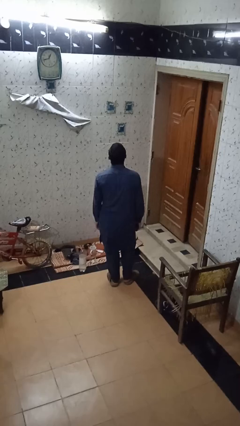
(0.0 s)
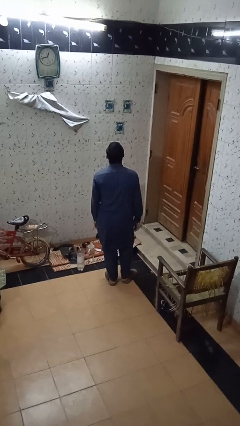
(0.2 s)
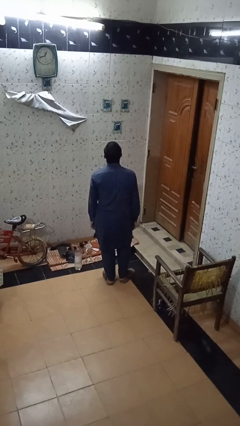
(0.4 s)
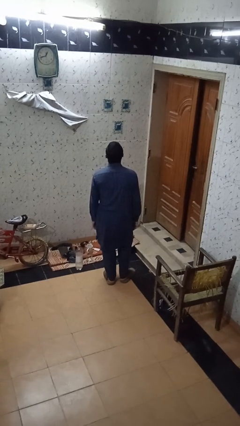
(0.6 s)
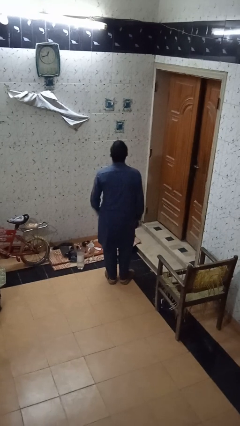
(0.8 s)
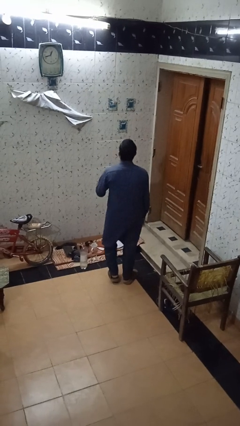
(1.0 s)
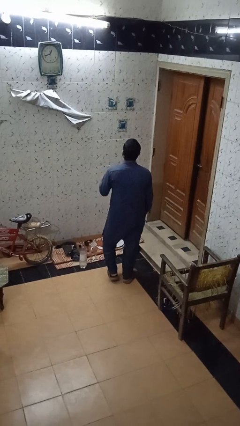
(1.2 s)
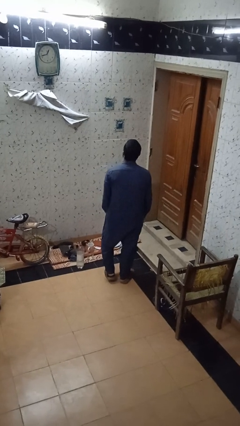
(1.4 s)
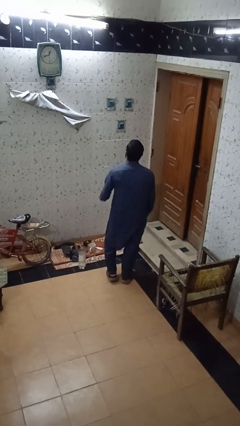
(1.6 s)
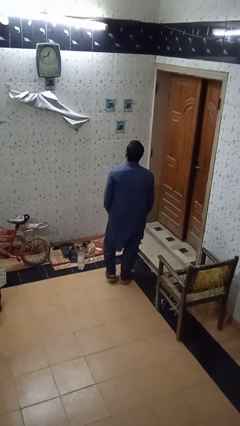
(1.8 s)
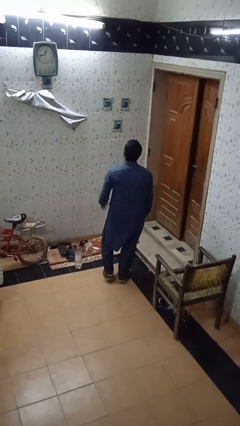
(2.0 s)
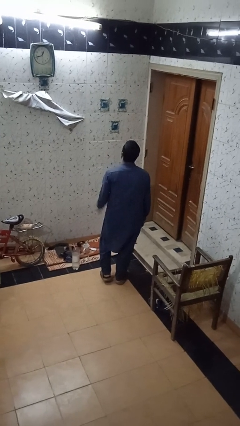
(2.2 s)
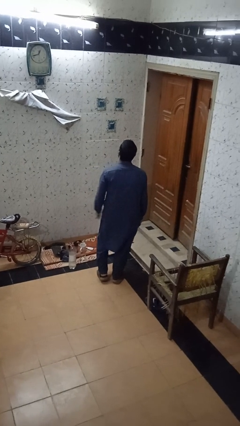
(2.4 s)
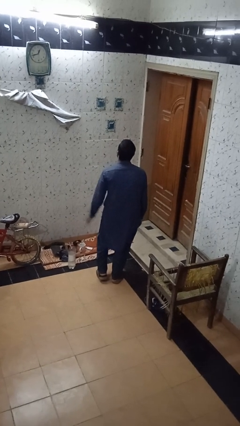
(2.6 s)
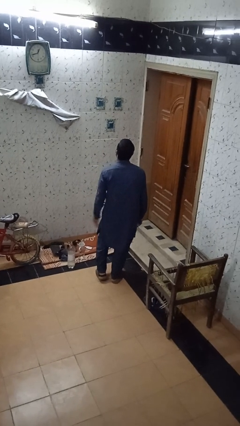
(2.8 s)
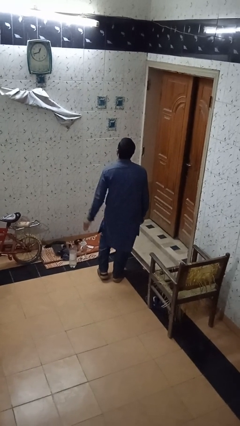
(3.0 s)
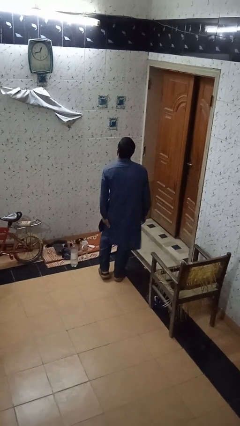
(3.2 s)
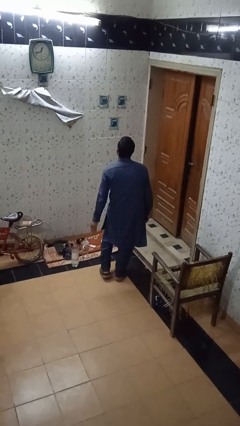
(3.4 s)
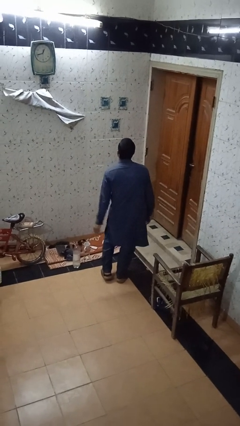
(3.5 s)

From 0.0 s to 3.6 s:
person slaps hands on thighs

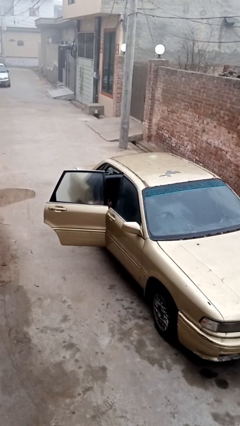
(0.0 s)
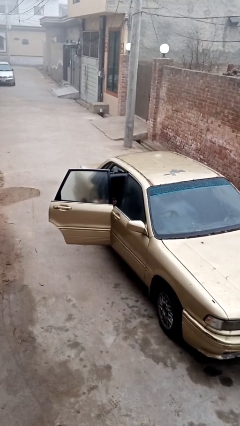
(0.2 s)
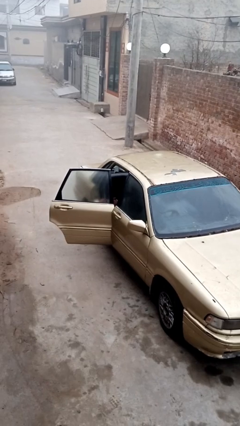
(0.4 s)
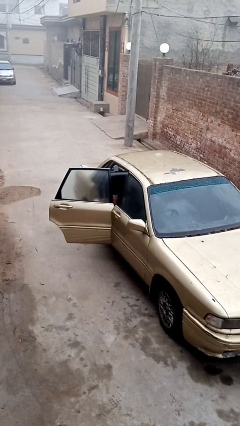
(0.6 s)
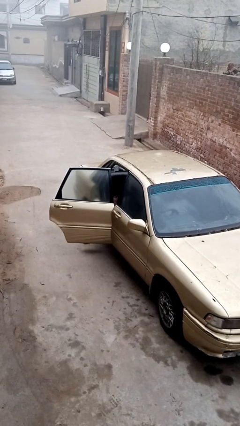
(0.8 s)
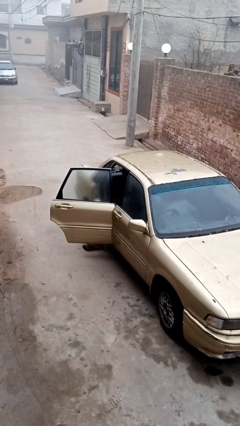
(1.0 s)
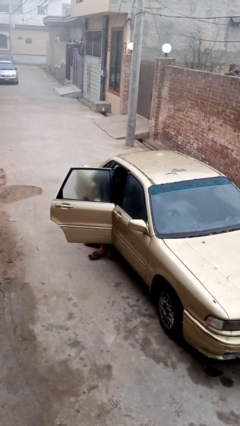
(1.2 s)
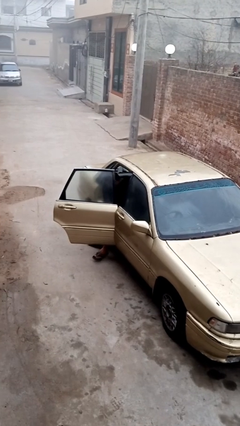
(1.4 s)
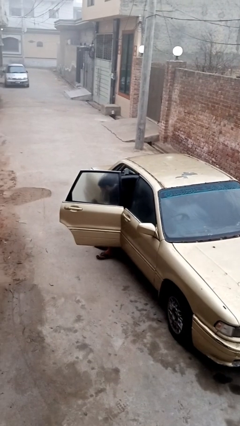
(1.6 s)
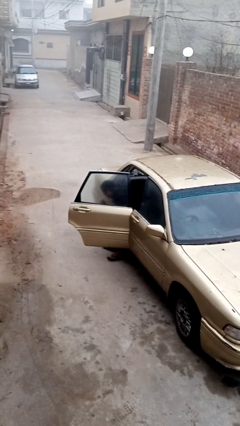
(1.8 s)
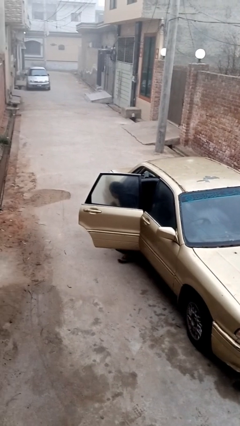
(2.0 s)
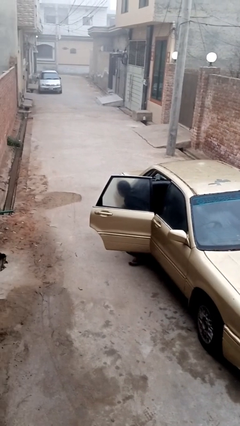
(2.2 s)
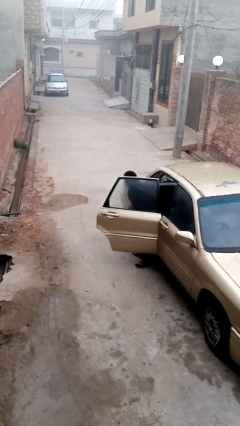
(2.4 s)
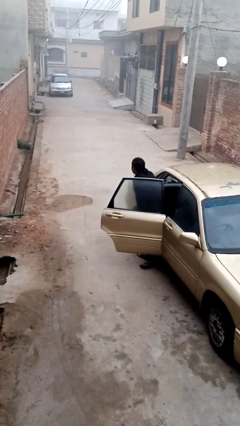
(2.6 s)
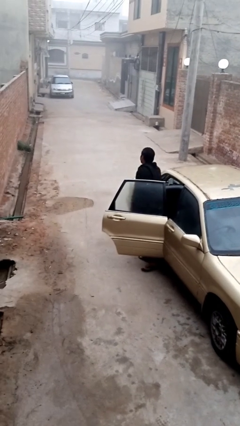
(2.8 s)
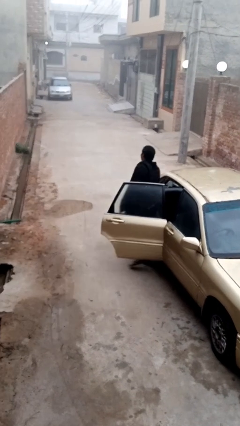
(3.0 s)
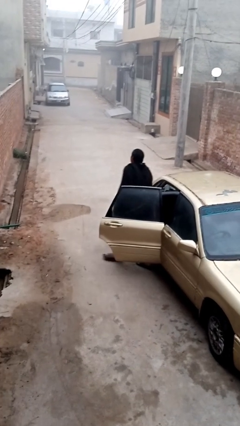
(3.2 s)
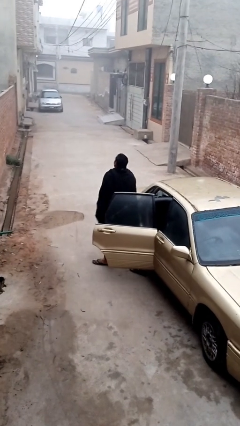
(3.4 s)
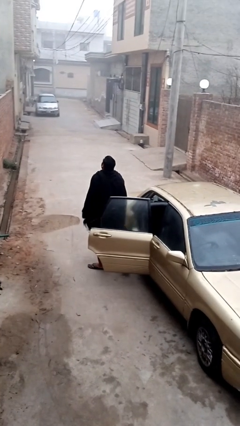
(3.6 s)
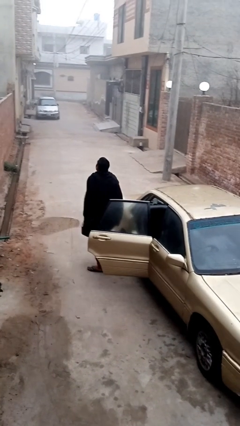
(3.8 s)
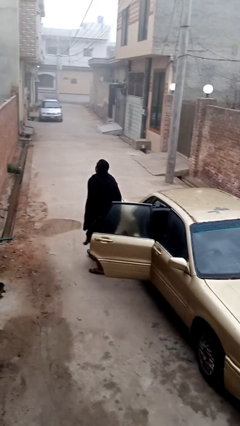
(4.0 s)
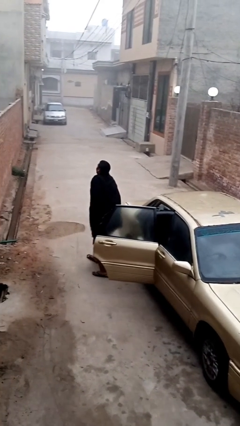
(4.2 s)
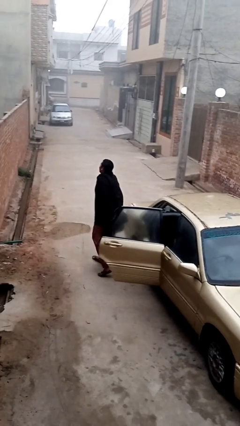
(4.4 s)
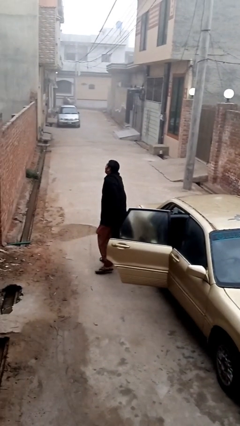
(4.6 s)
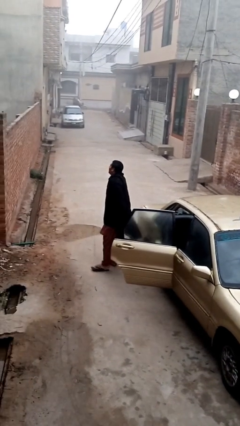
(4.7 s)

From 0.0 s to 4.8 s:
person exits car

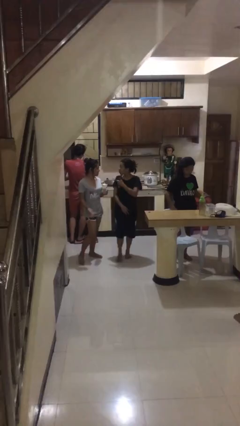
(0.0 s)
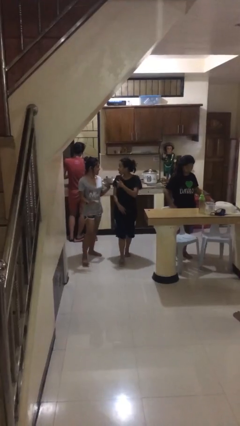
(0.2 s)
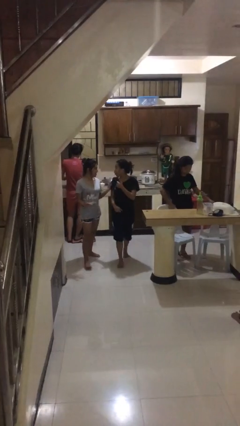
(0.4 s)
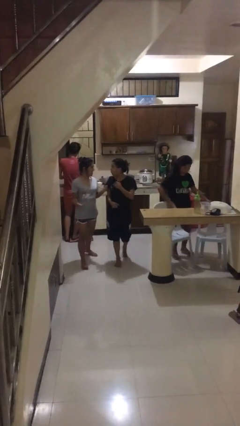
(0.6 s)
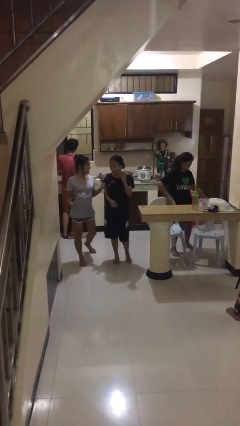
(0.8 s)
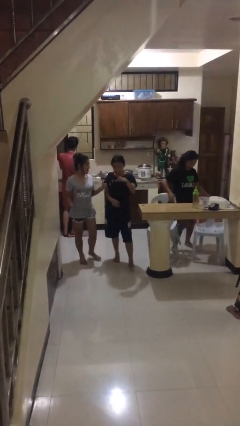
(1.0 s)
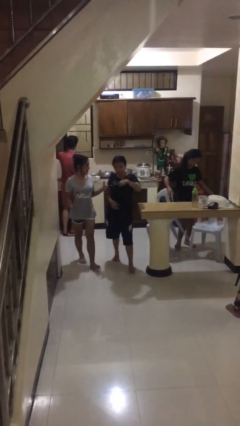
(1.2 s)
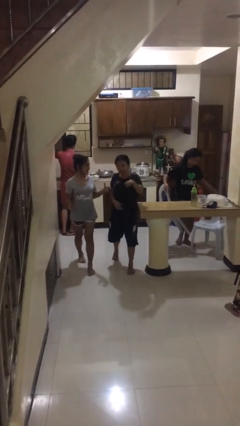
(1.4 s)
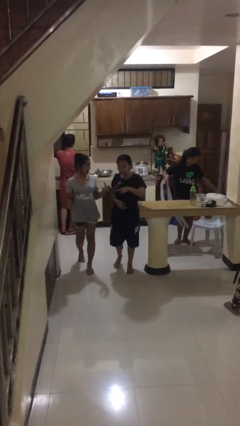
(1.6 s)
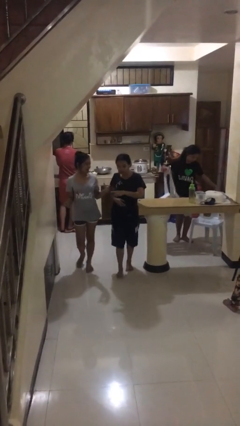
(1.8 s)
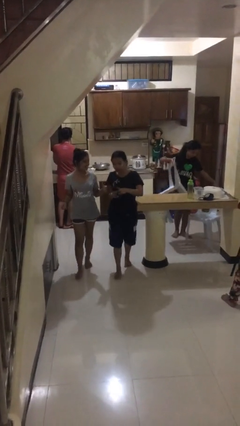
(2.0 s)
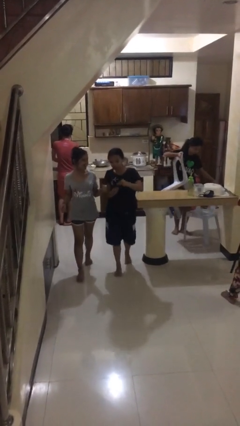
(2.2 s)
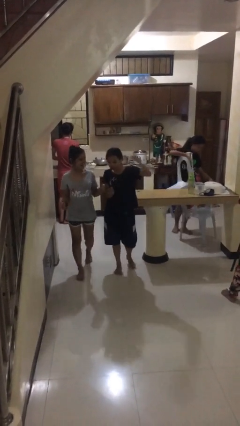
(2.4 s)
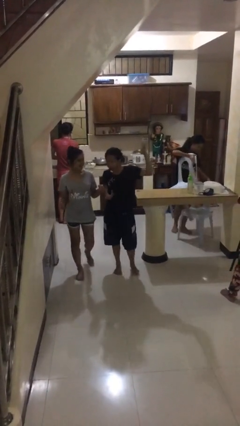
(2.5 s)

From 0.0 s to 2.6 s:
person talks to person

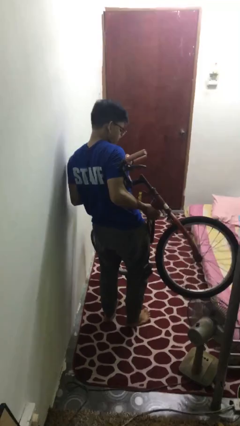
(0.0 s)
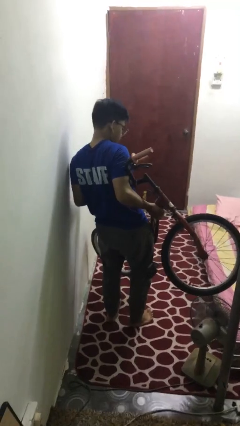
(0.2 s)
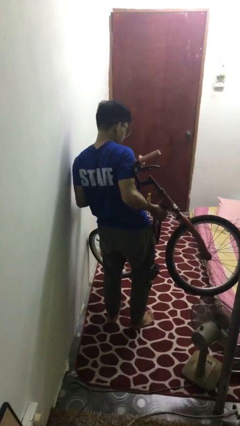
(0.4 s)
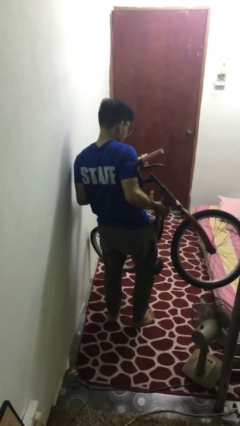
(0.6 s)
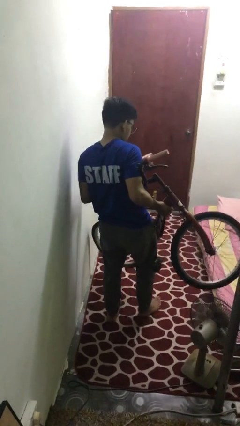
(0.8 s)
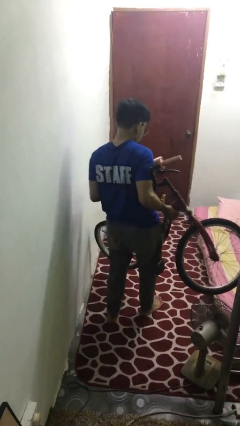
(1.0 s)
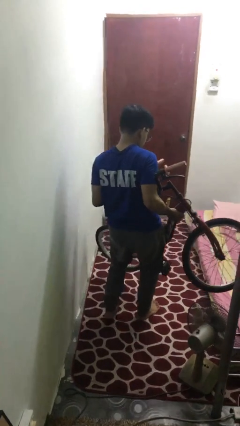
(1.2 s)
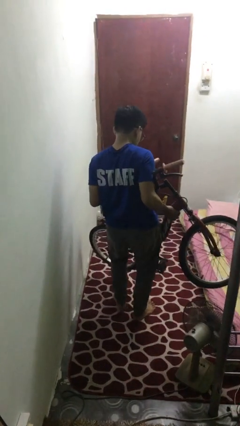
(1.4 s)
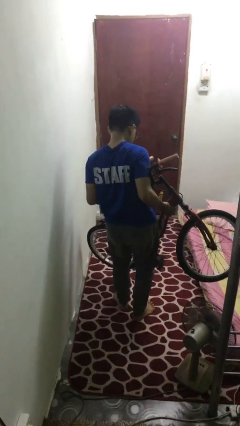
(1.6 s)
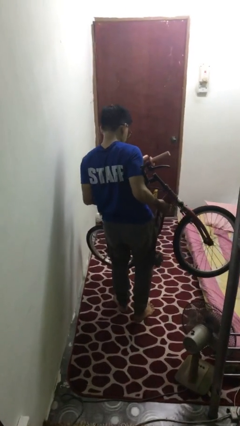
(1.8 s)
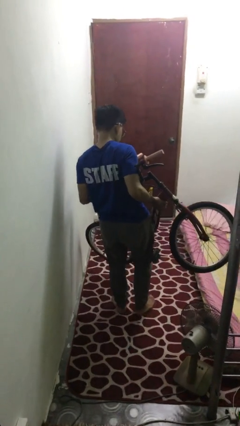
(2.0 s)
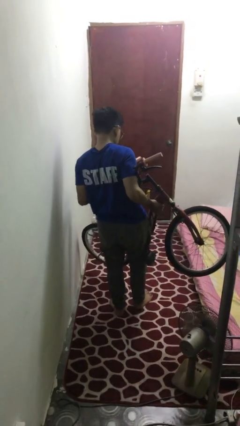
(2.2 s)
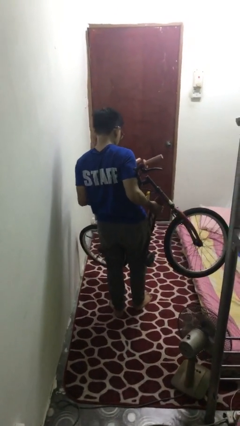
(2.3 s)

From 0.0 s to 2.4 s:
person carries bicycle

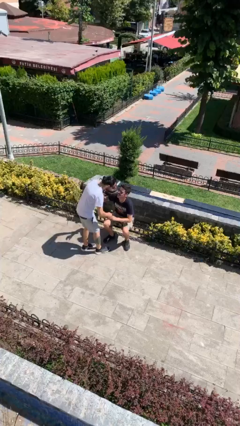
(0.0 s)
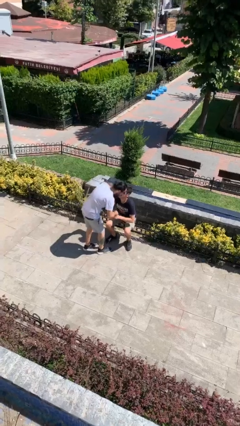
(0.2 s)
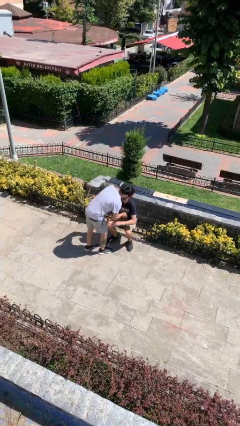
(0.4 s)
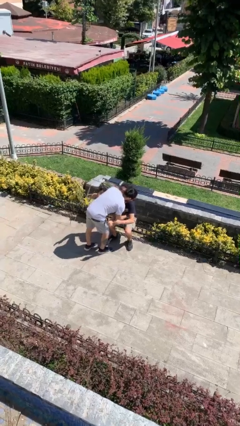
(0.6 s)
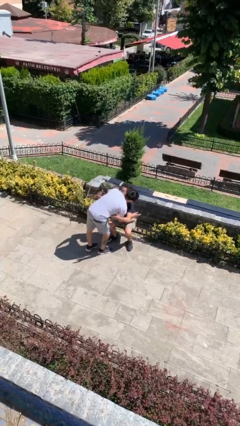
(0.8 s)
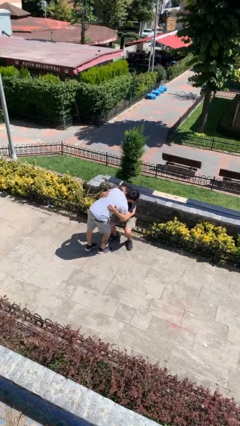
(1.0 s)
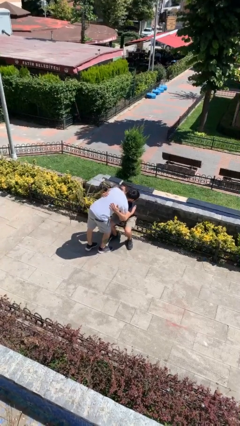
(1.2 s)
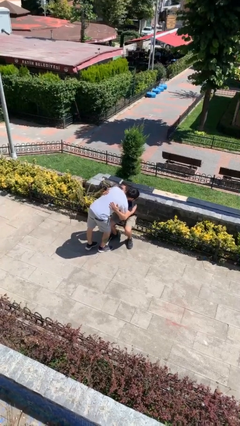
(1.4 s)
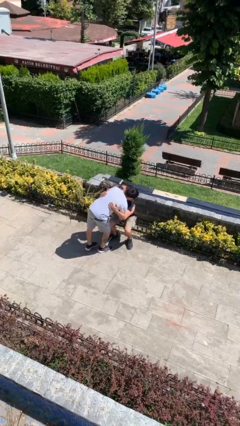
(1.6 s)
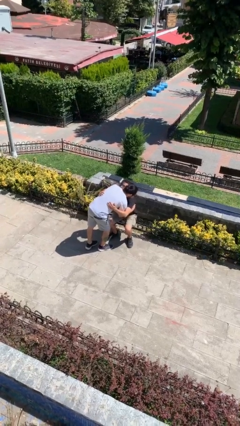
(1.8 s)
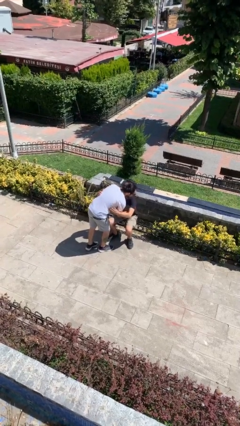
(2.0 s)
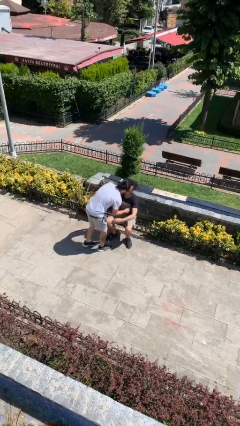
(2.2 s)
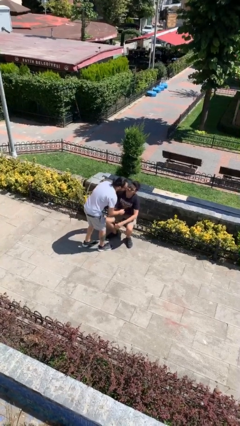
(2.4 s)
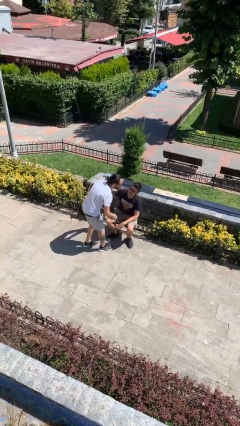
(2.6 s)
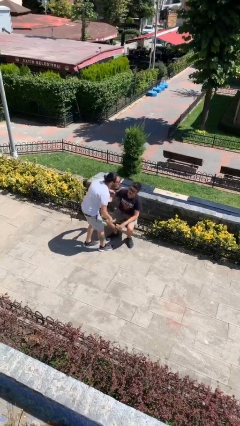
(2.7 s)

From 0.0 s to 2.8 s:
person embraces person

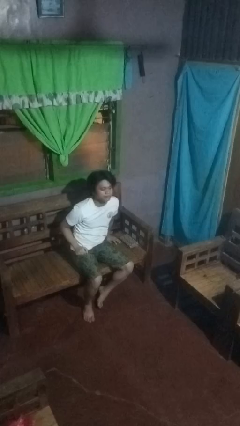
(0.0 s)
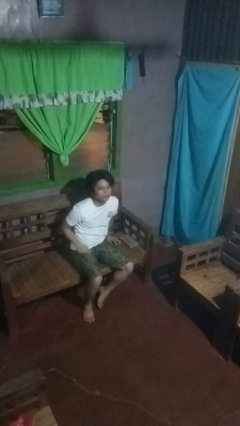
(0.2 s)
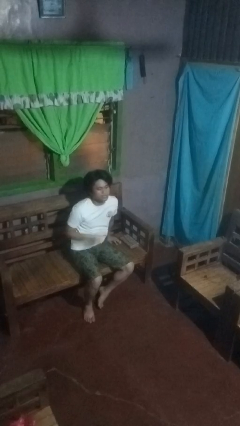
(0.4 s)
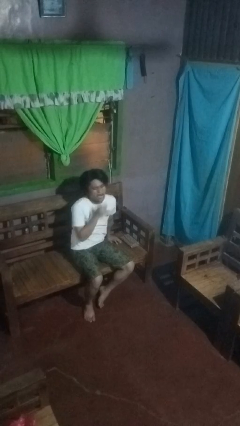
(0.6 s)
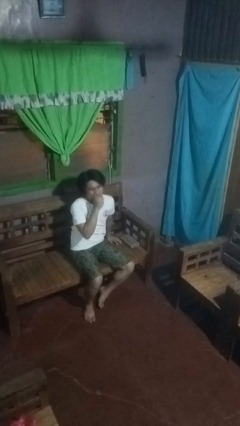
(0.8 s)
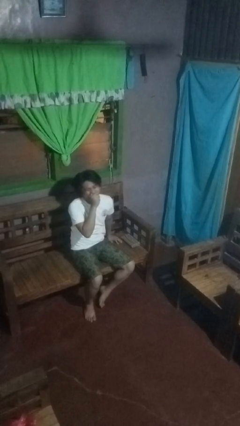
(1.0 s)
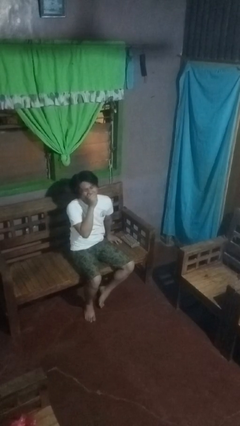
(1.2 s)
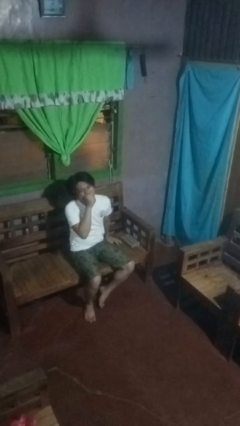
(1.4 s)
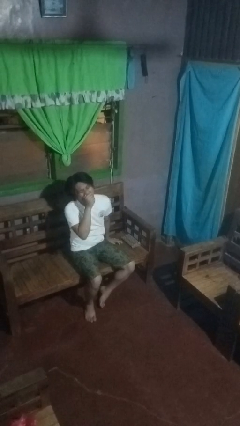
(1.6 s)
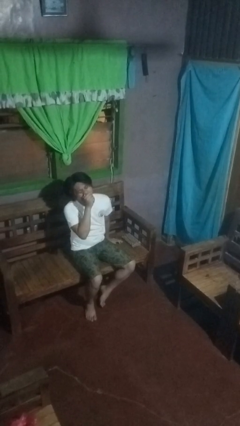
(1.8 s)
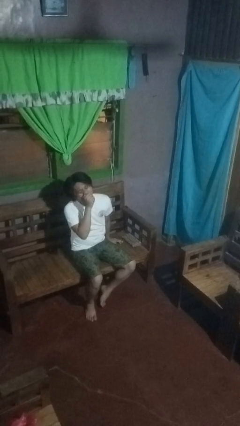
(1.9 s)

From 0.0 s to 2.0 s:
person yawns
